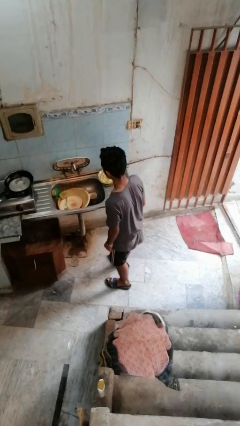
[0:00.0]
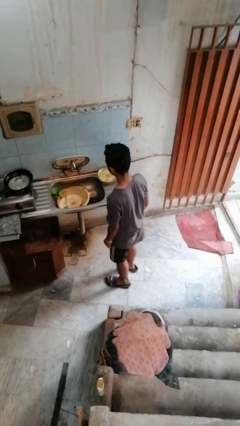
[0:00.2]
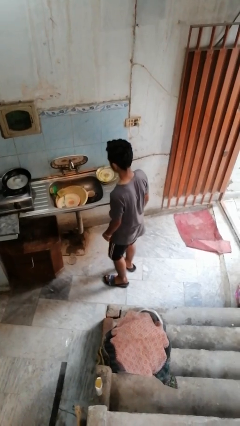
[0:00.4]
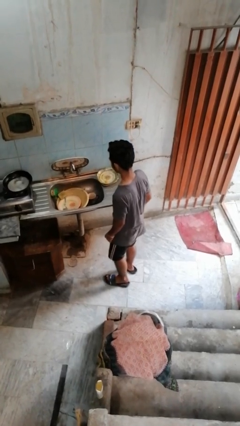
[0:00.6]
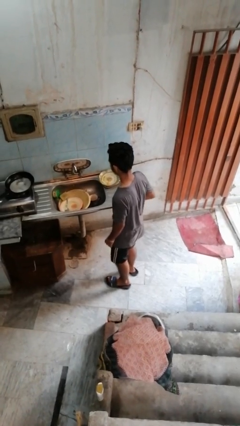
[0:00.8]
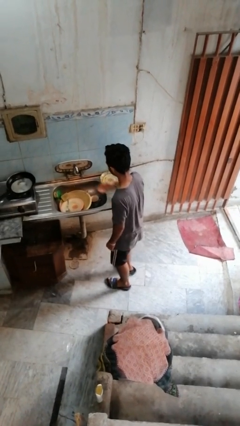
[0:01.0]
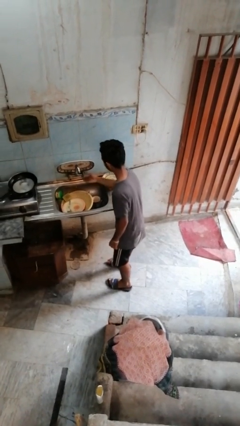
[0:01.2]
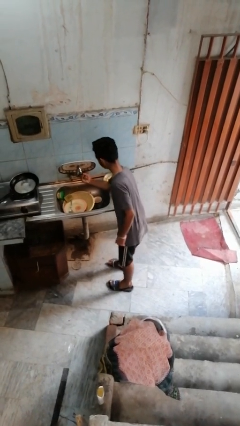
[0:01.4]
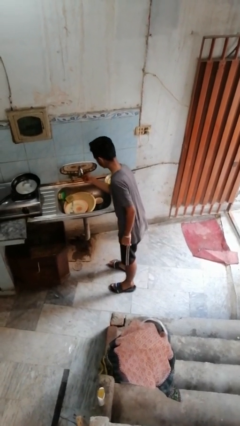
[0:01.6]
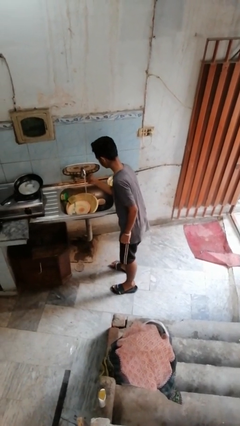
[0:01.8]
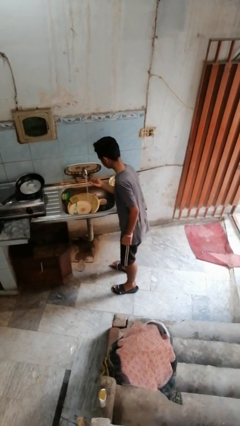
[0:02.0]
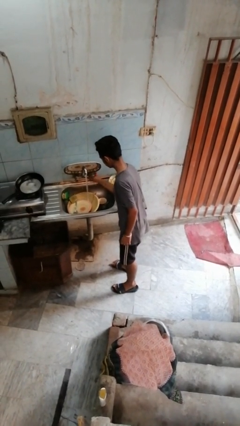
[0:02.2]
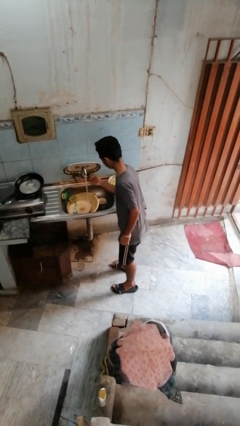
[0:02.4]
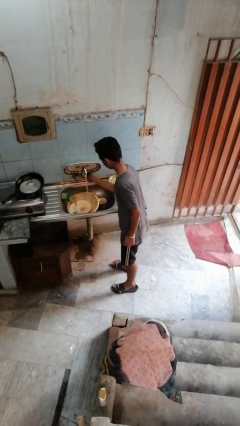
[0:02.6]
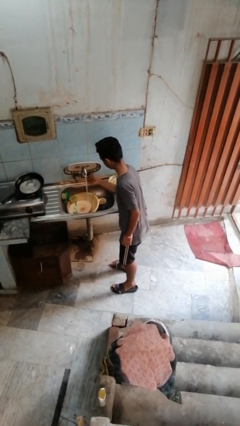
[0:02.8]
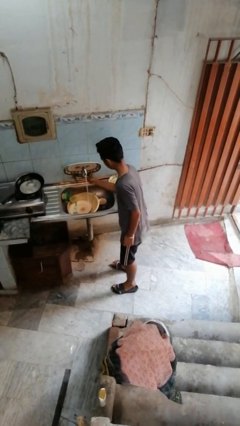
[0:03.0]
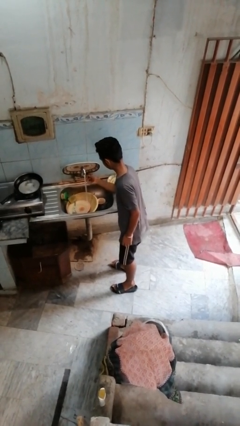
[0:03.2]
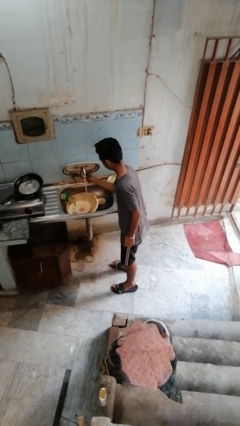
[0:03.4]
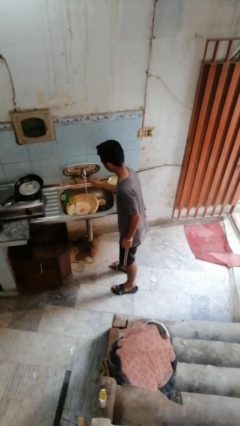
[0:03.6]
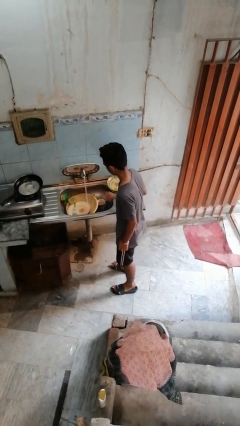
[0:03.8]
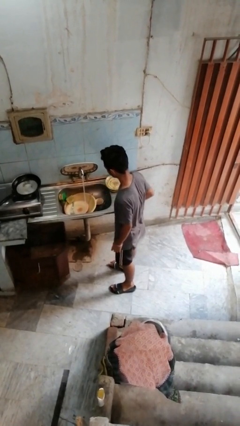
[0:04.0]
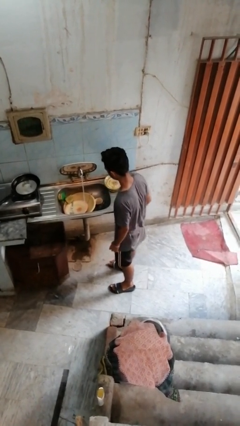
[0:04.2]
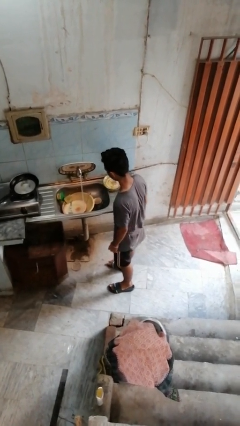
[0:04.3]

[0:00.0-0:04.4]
person turns on faucet

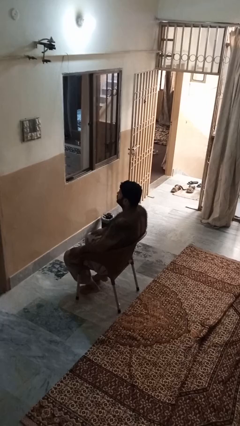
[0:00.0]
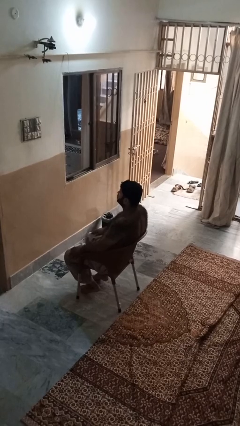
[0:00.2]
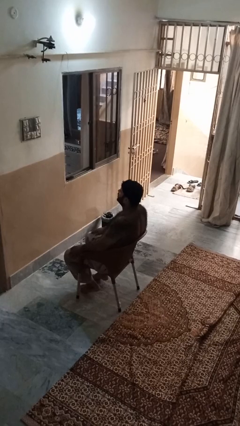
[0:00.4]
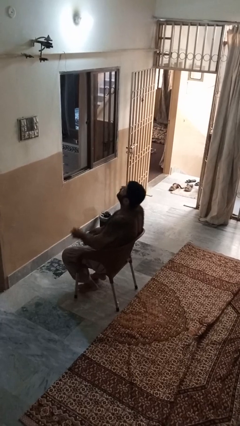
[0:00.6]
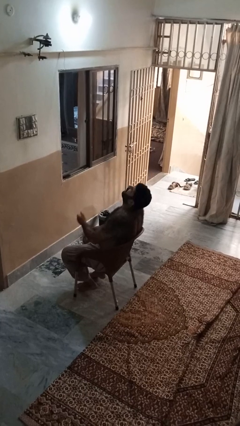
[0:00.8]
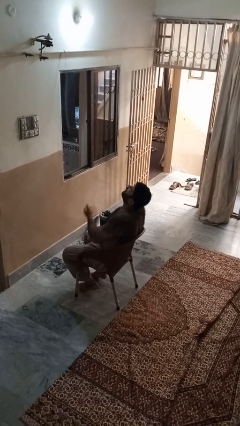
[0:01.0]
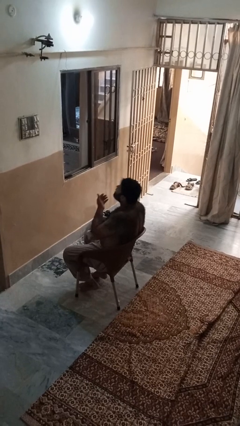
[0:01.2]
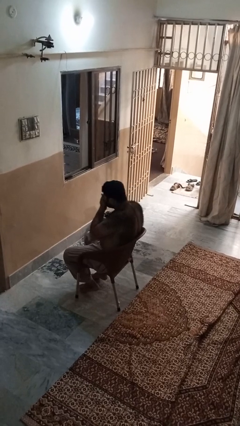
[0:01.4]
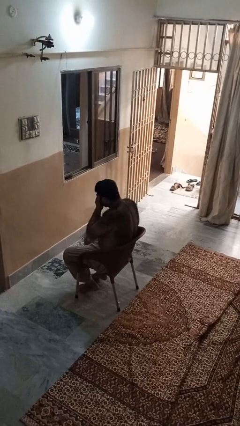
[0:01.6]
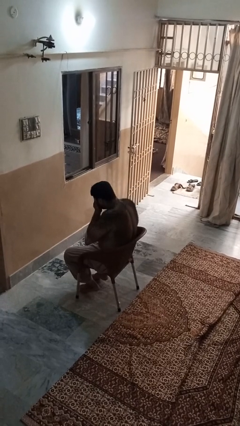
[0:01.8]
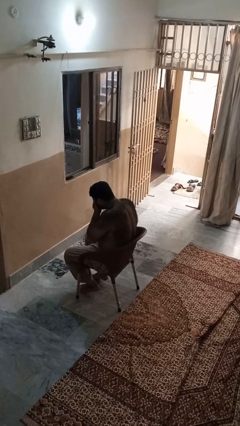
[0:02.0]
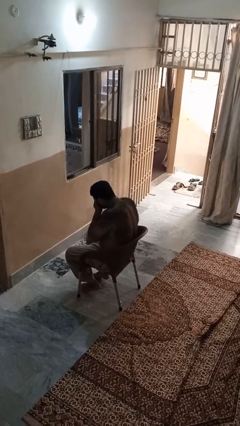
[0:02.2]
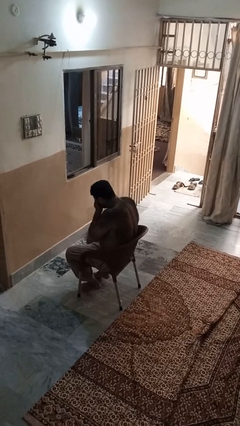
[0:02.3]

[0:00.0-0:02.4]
person sneezes into hand

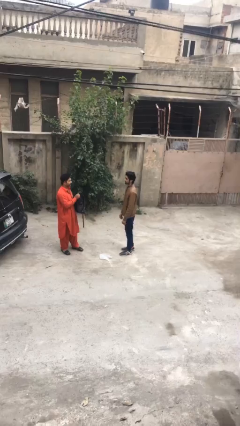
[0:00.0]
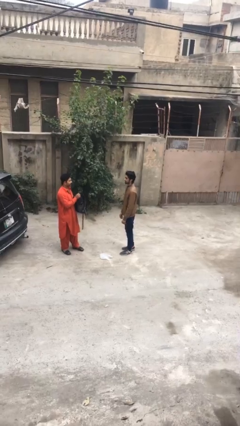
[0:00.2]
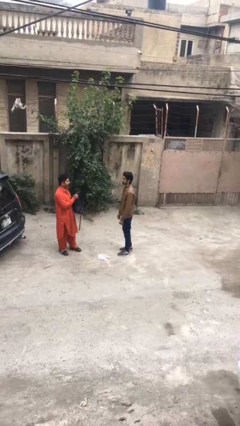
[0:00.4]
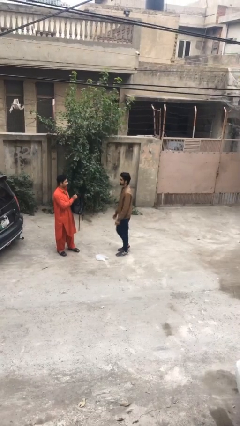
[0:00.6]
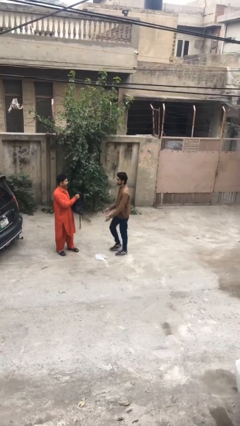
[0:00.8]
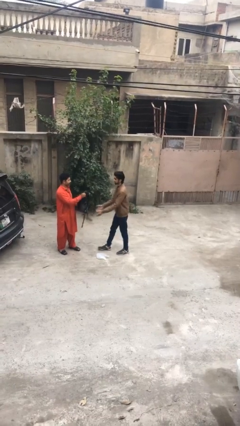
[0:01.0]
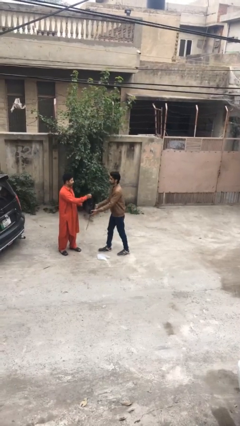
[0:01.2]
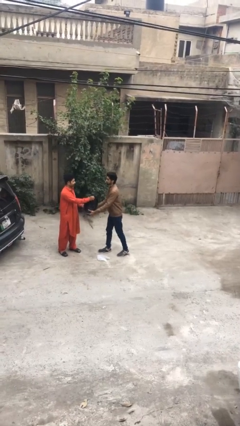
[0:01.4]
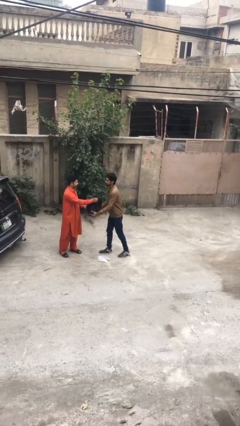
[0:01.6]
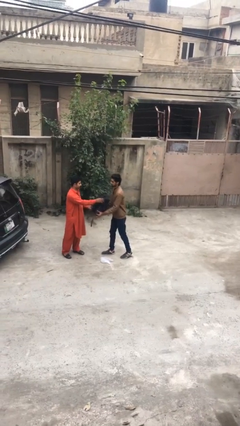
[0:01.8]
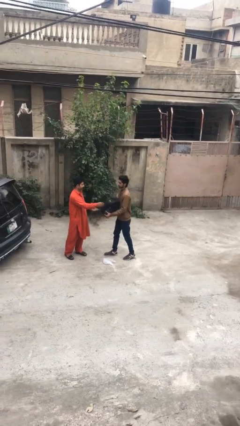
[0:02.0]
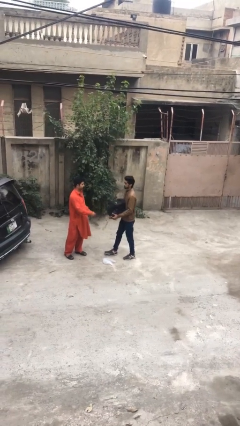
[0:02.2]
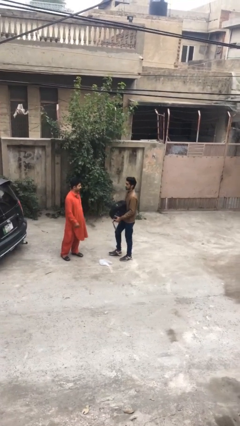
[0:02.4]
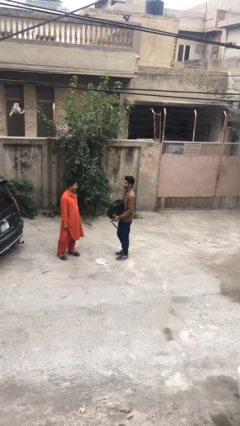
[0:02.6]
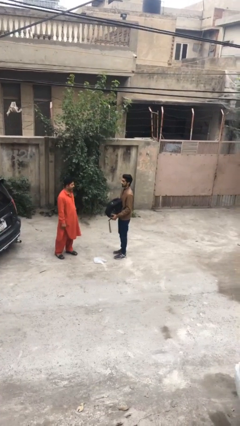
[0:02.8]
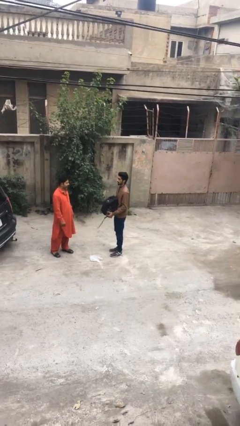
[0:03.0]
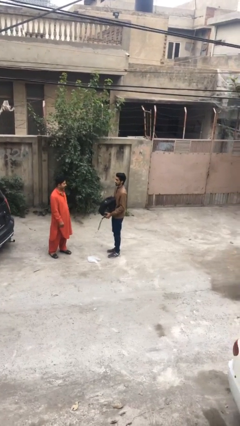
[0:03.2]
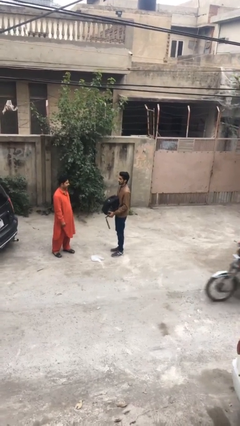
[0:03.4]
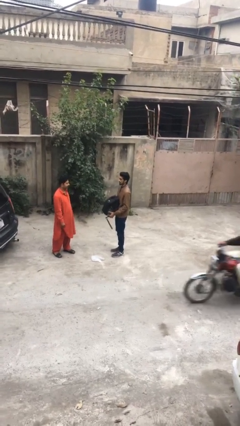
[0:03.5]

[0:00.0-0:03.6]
person transfers object to person

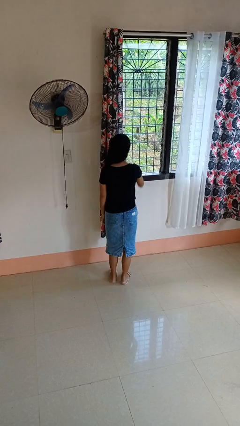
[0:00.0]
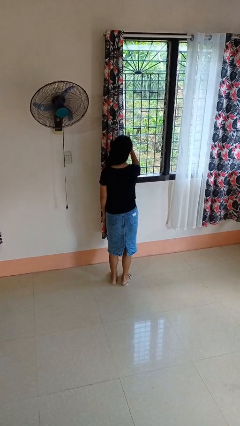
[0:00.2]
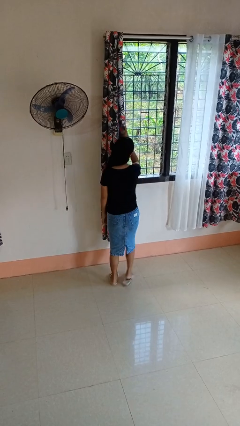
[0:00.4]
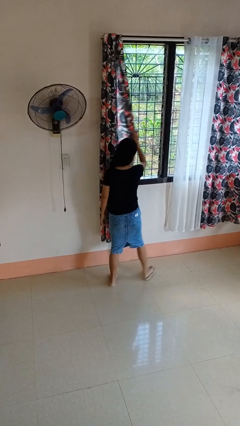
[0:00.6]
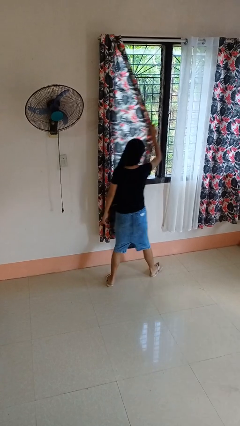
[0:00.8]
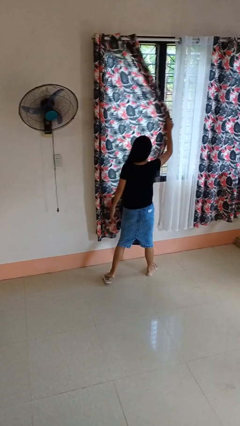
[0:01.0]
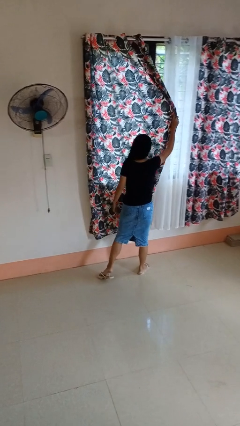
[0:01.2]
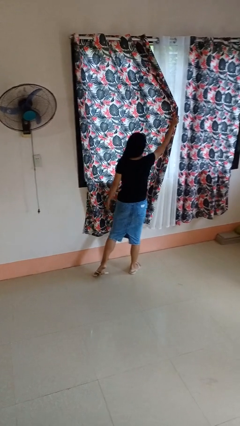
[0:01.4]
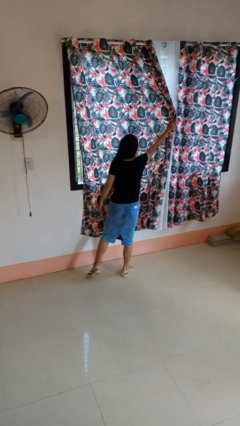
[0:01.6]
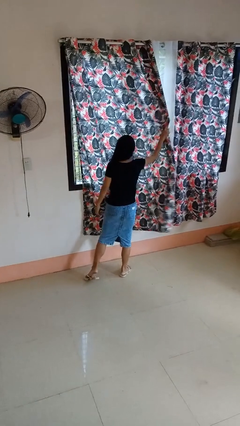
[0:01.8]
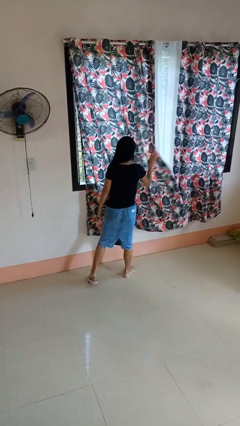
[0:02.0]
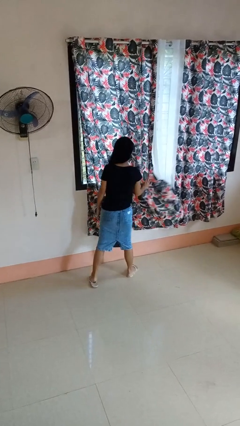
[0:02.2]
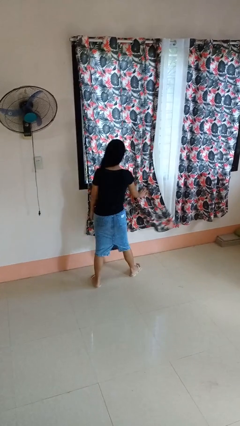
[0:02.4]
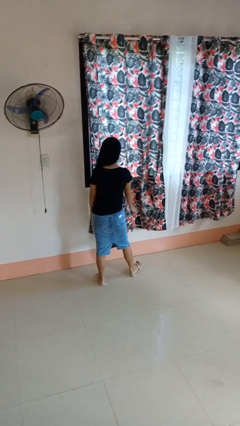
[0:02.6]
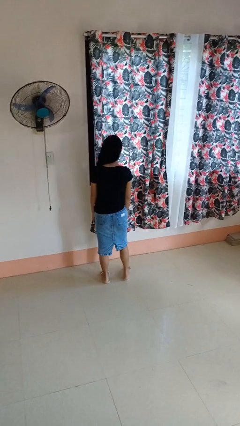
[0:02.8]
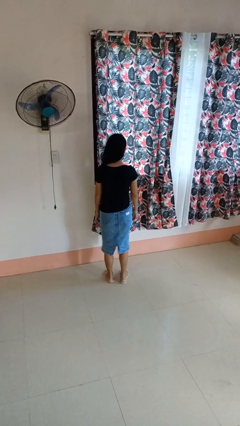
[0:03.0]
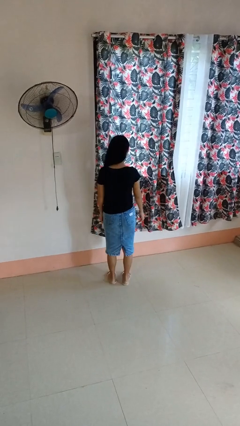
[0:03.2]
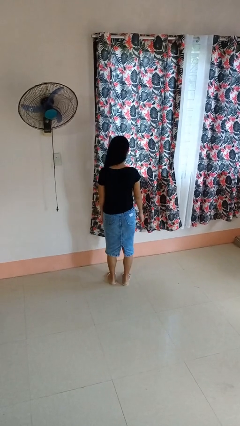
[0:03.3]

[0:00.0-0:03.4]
person closes curtains

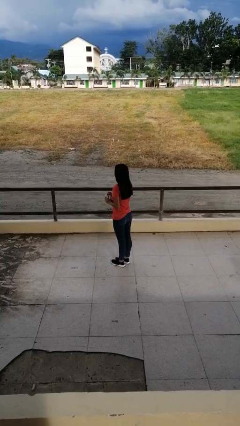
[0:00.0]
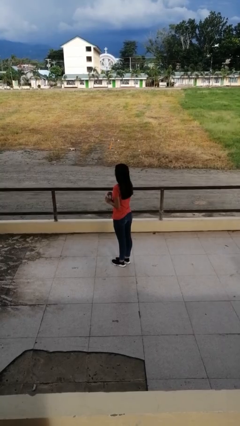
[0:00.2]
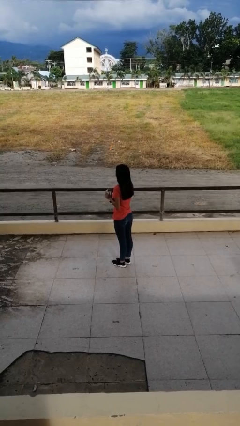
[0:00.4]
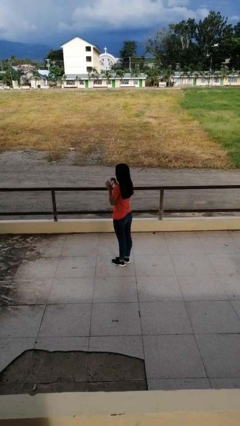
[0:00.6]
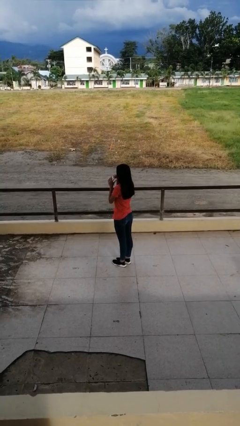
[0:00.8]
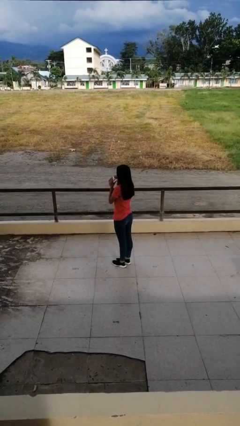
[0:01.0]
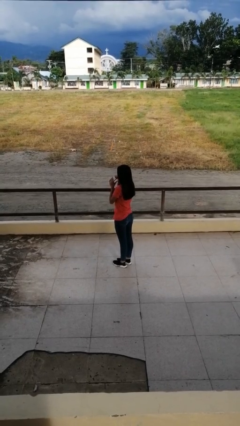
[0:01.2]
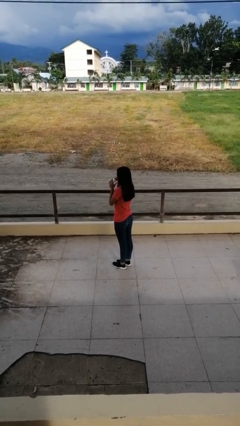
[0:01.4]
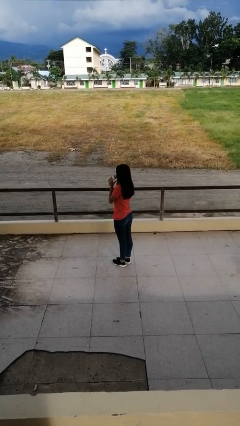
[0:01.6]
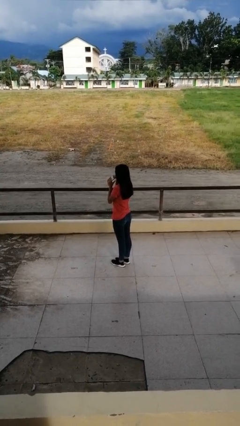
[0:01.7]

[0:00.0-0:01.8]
person drinks from straw

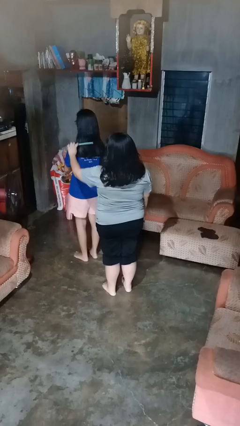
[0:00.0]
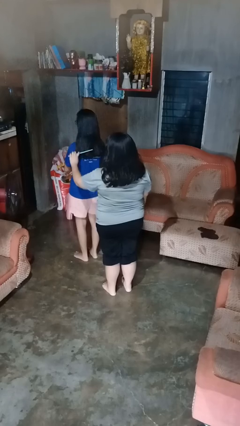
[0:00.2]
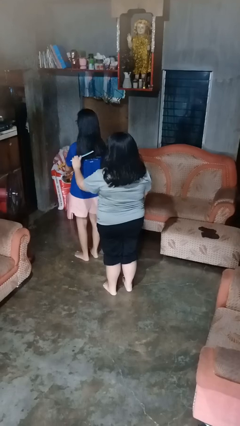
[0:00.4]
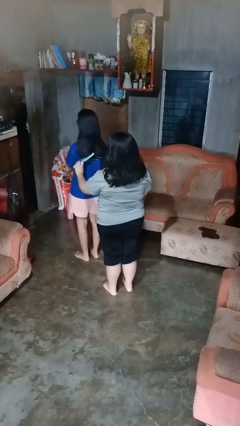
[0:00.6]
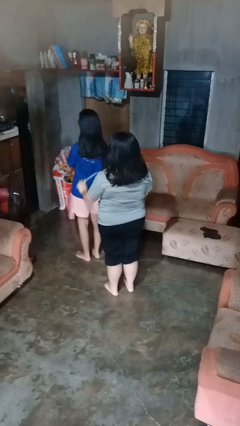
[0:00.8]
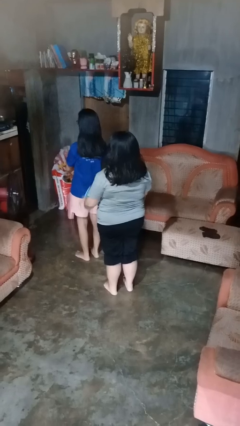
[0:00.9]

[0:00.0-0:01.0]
person brushes hair of person

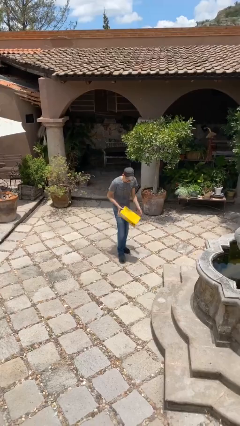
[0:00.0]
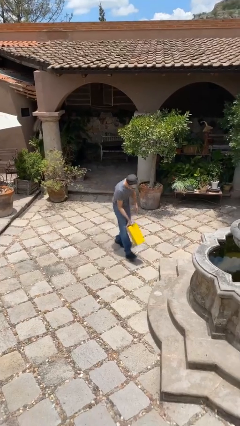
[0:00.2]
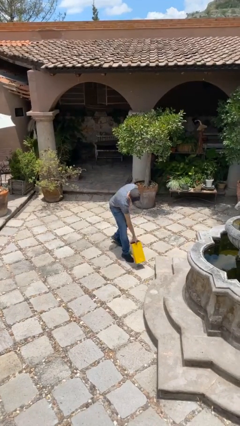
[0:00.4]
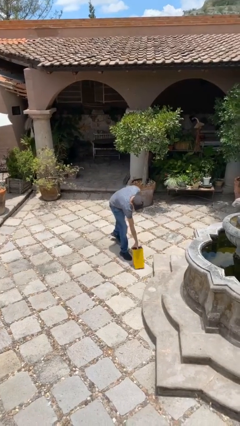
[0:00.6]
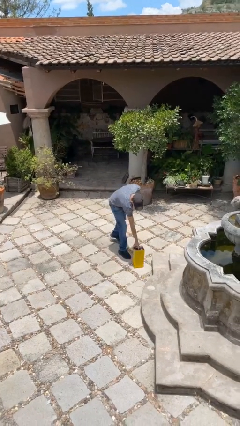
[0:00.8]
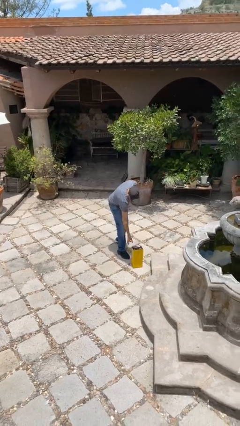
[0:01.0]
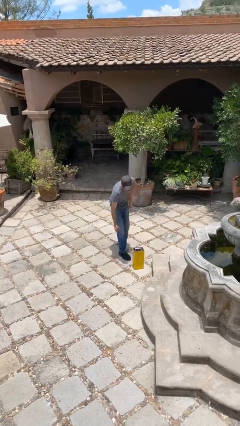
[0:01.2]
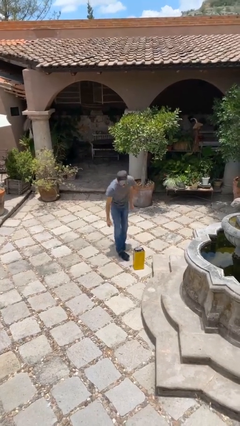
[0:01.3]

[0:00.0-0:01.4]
person puts down object on floor
